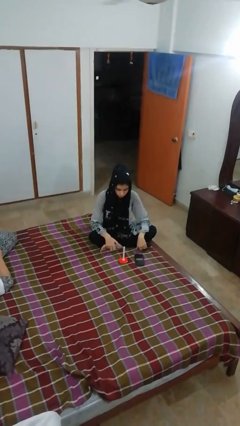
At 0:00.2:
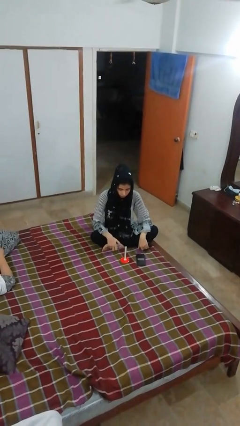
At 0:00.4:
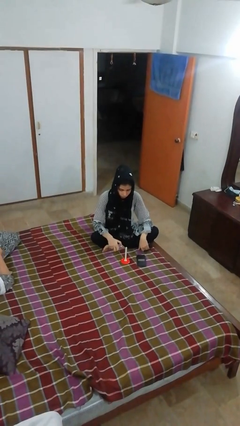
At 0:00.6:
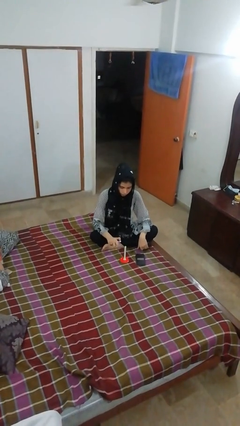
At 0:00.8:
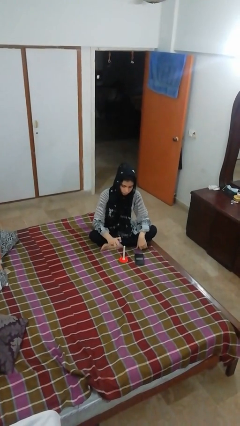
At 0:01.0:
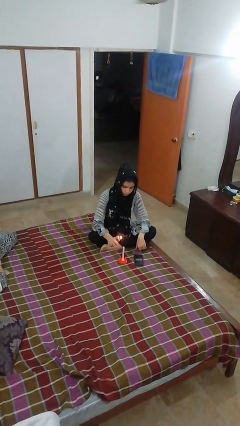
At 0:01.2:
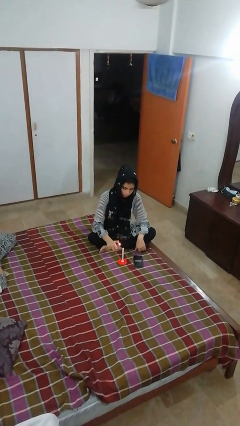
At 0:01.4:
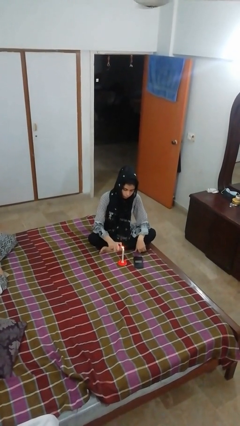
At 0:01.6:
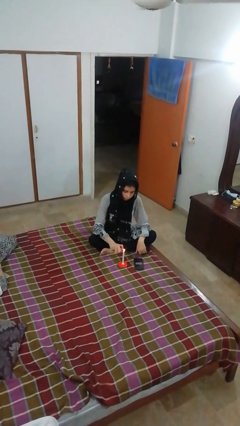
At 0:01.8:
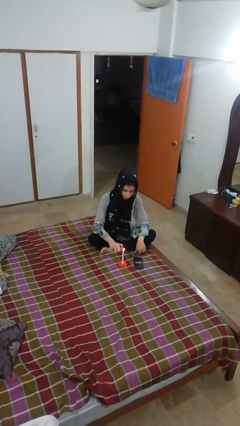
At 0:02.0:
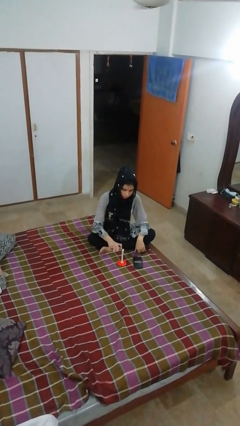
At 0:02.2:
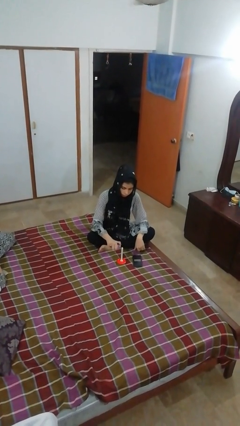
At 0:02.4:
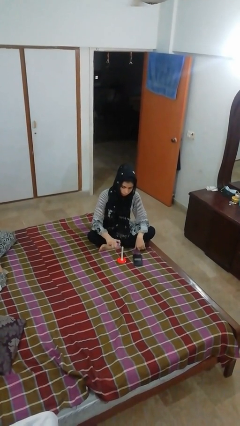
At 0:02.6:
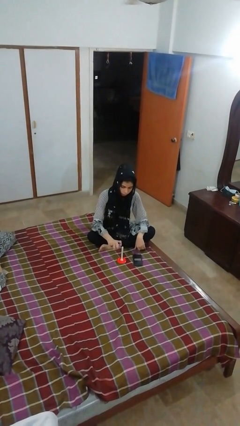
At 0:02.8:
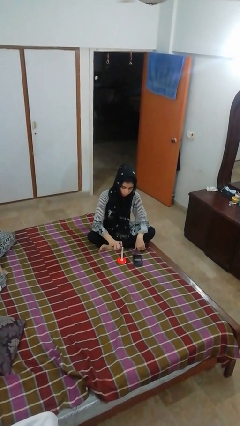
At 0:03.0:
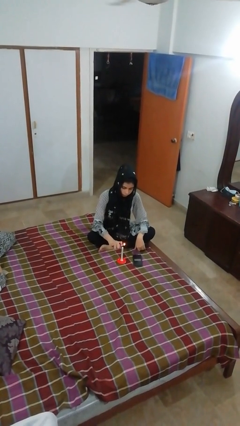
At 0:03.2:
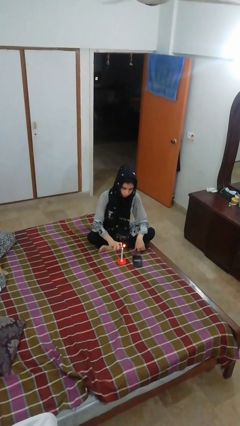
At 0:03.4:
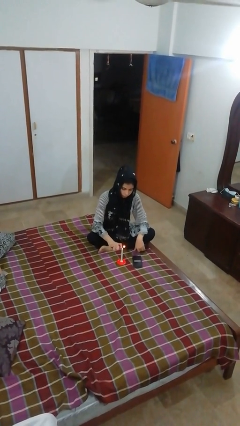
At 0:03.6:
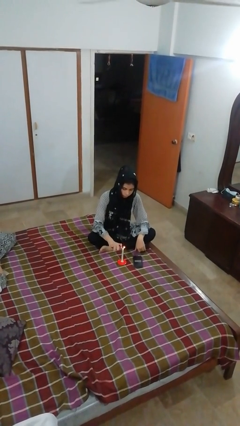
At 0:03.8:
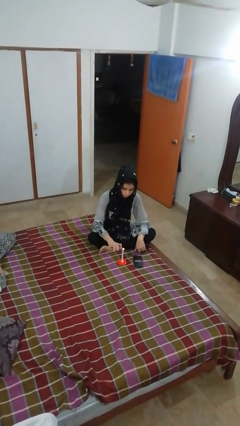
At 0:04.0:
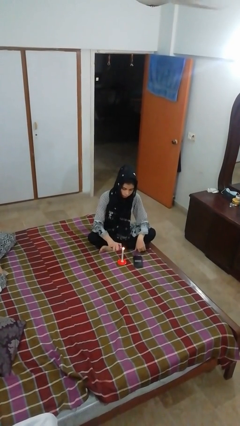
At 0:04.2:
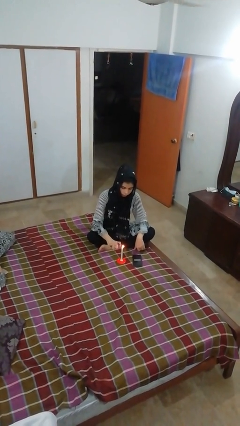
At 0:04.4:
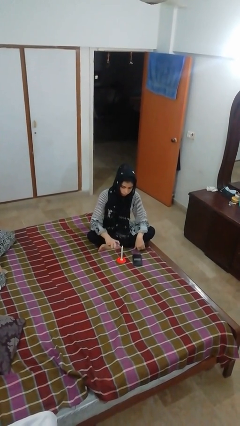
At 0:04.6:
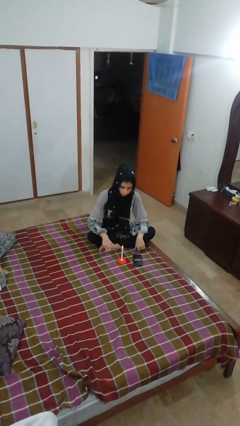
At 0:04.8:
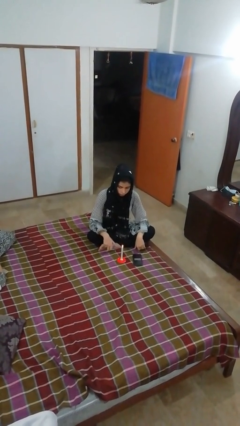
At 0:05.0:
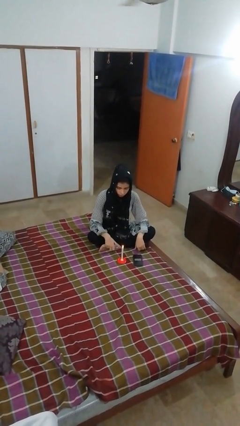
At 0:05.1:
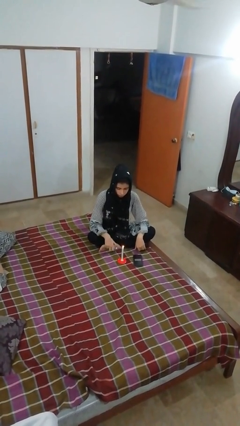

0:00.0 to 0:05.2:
person lights candle

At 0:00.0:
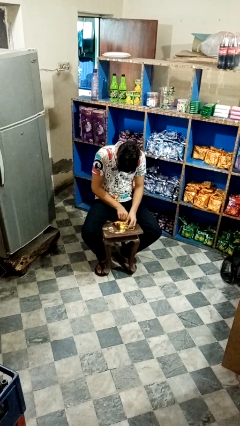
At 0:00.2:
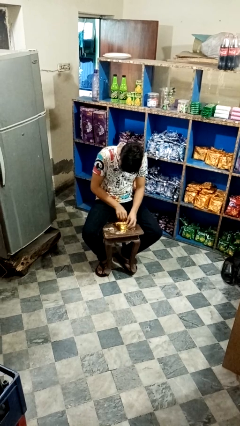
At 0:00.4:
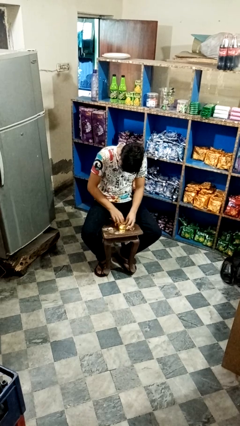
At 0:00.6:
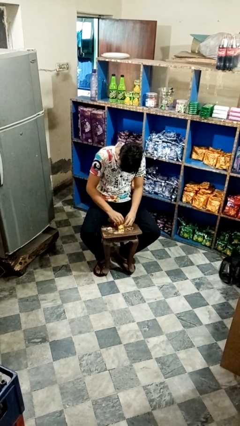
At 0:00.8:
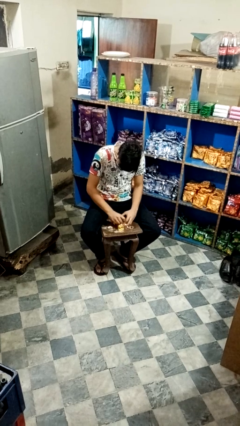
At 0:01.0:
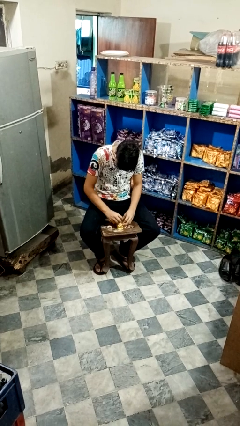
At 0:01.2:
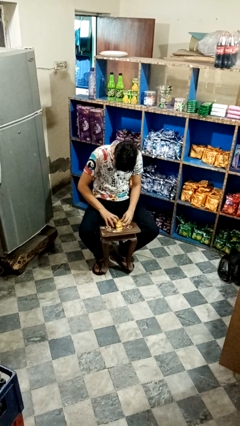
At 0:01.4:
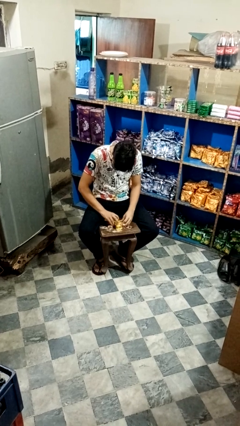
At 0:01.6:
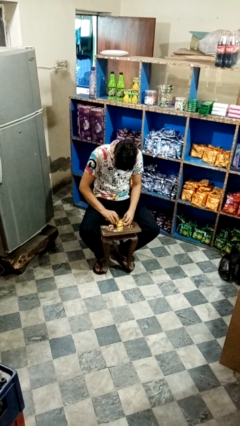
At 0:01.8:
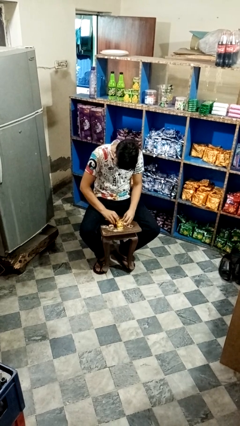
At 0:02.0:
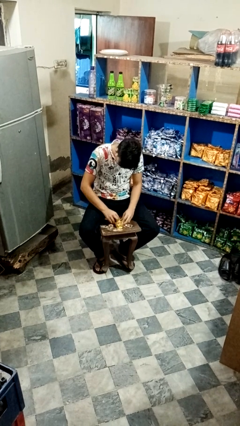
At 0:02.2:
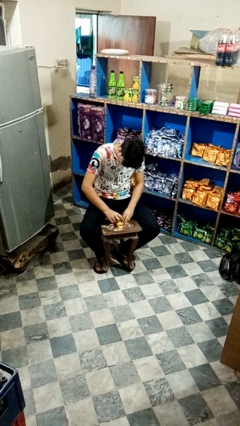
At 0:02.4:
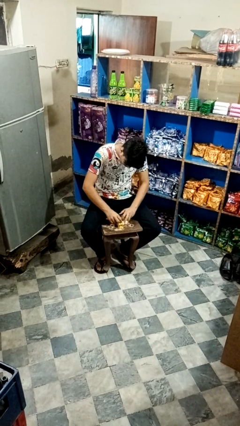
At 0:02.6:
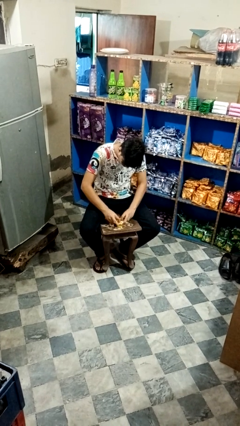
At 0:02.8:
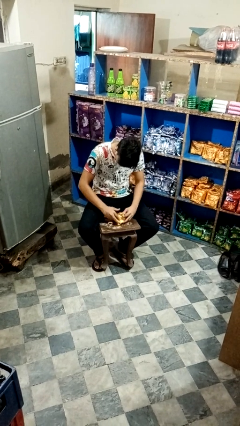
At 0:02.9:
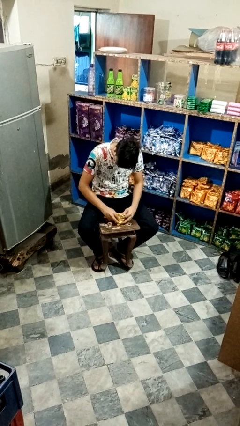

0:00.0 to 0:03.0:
person wraps box

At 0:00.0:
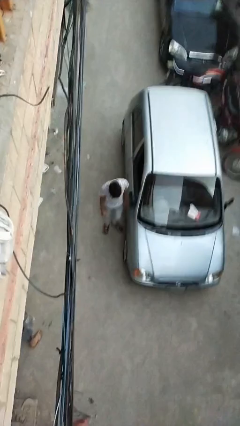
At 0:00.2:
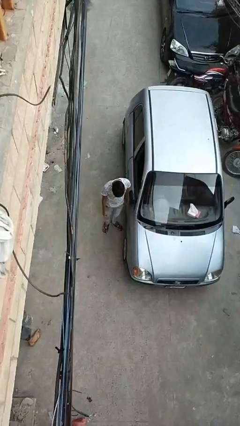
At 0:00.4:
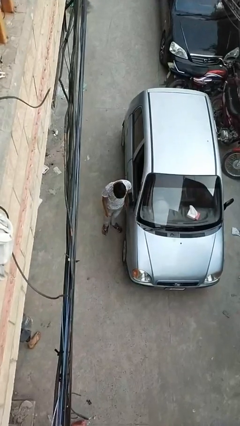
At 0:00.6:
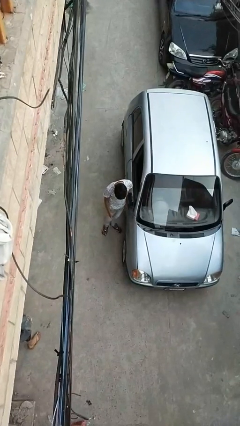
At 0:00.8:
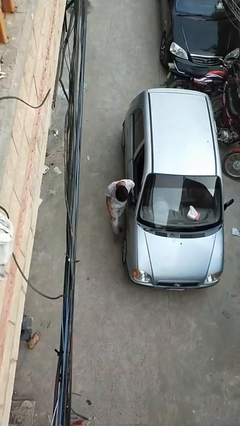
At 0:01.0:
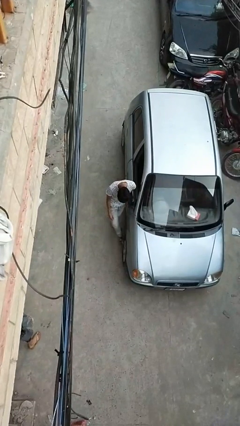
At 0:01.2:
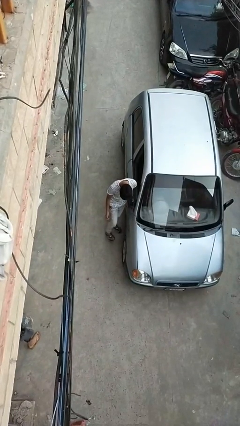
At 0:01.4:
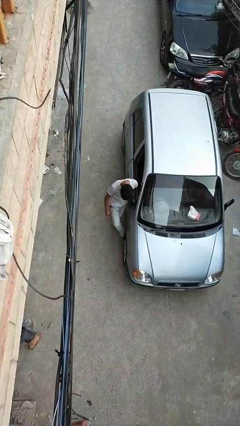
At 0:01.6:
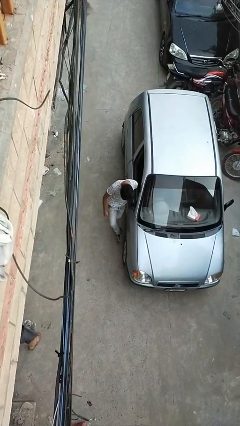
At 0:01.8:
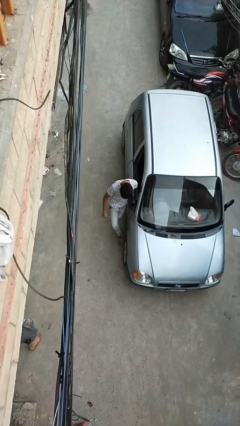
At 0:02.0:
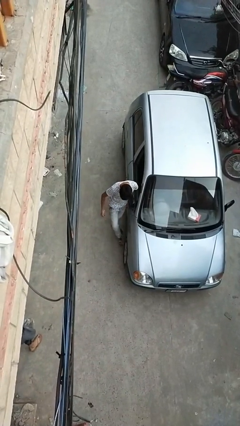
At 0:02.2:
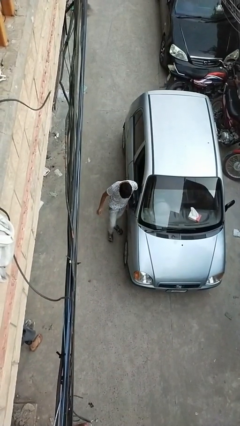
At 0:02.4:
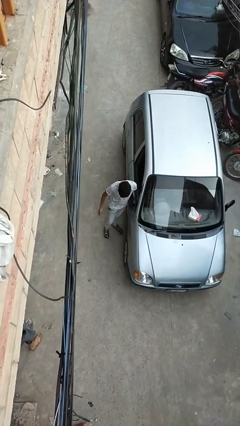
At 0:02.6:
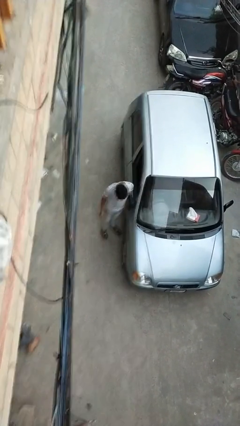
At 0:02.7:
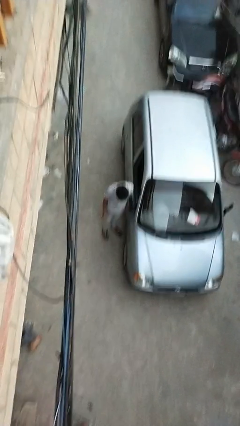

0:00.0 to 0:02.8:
person kicks car tires

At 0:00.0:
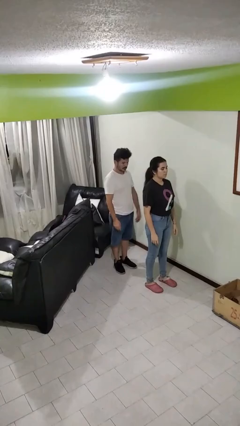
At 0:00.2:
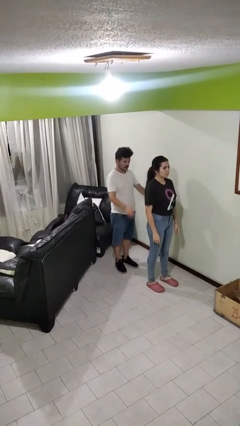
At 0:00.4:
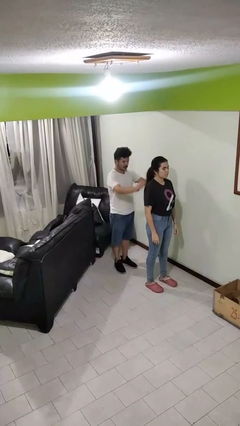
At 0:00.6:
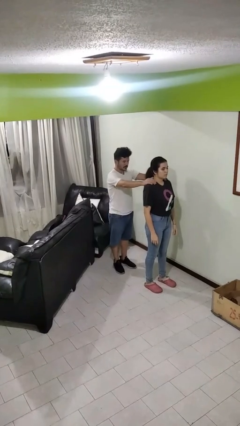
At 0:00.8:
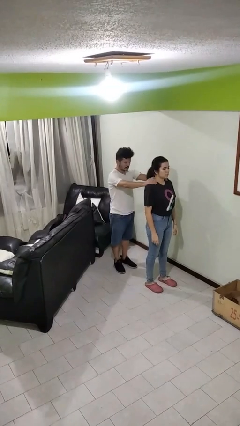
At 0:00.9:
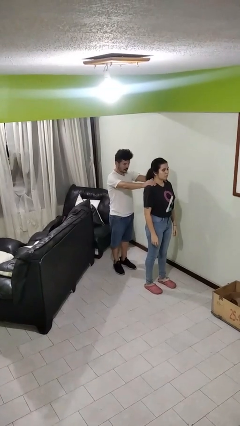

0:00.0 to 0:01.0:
person grabs person by shoulder

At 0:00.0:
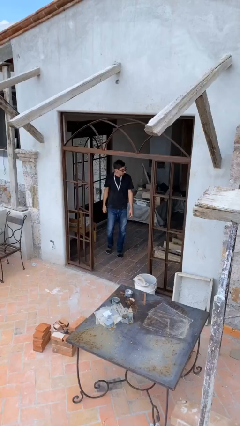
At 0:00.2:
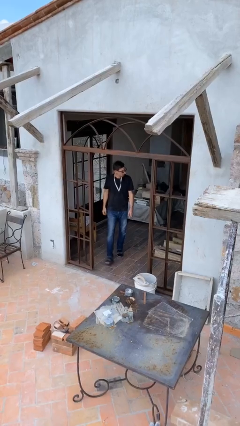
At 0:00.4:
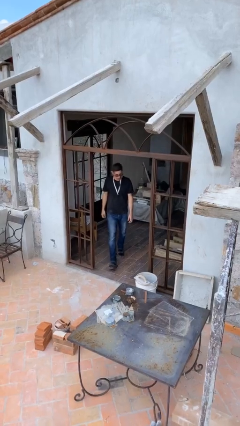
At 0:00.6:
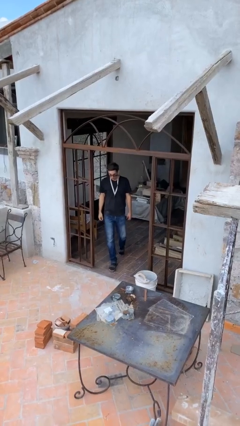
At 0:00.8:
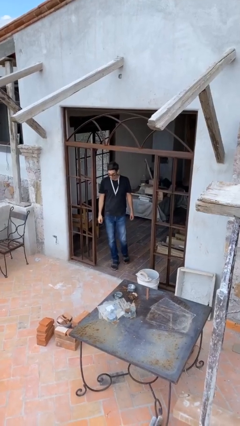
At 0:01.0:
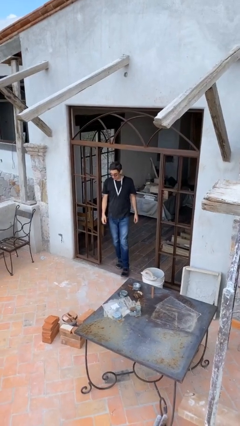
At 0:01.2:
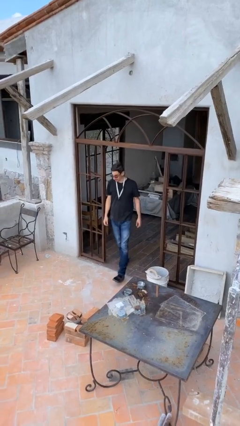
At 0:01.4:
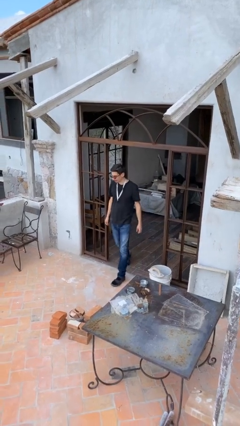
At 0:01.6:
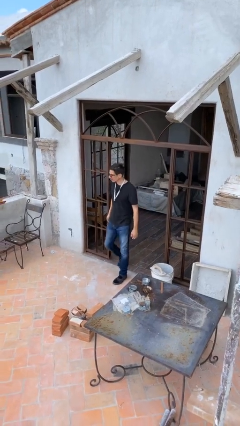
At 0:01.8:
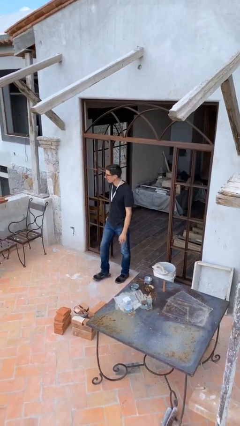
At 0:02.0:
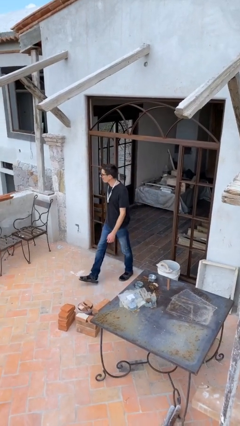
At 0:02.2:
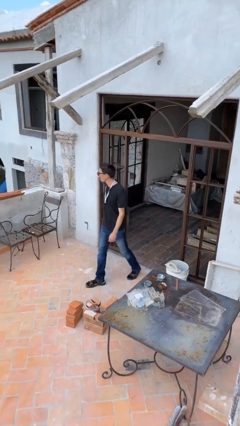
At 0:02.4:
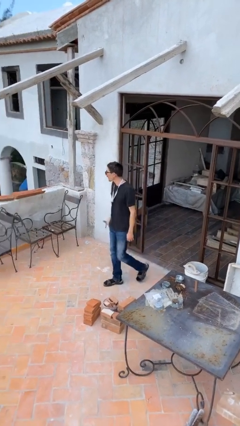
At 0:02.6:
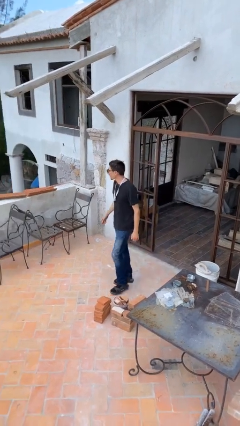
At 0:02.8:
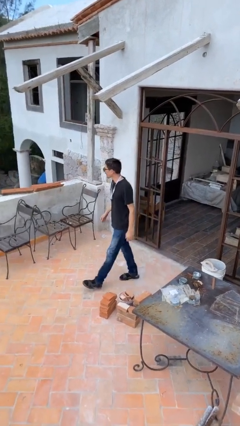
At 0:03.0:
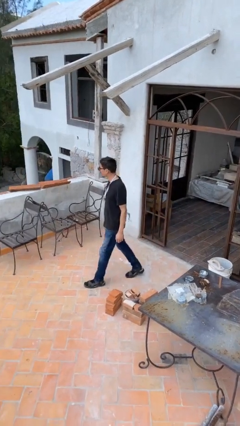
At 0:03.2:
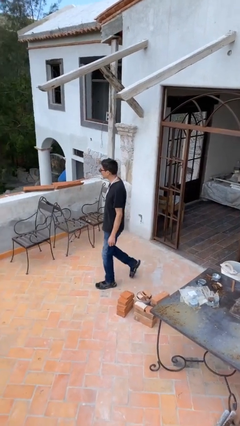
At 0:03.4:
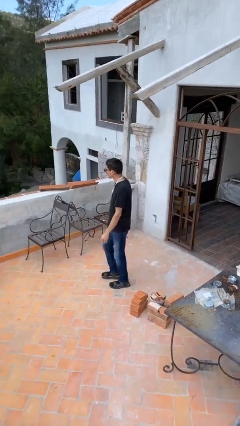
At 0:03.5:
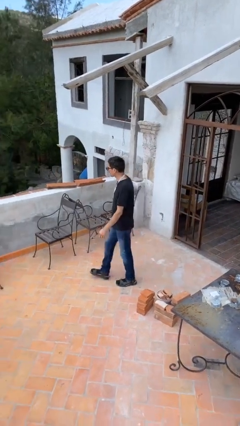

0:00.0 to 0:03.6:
person enters scene through structure

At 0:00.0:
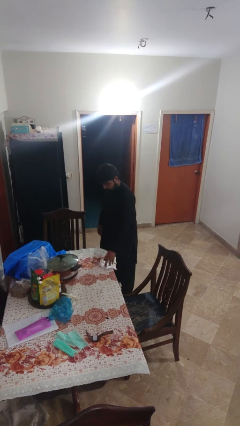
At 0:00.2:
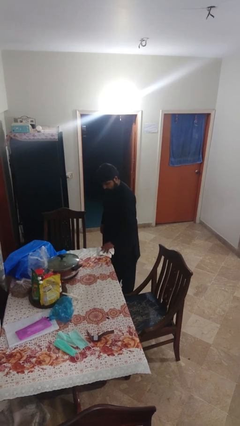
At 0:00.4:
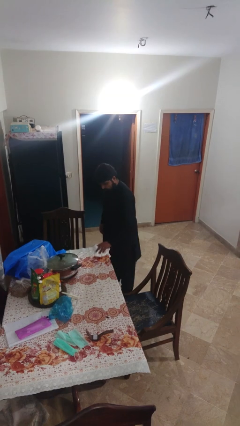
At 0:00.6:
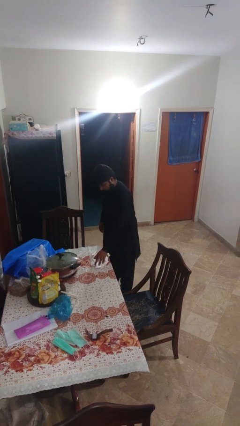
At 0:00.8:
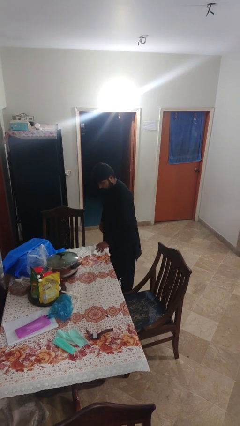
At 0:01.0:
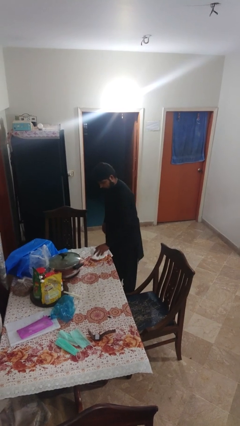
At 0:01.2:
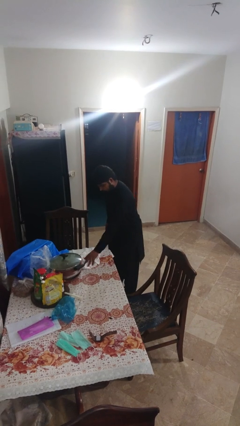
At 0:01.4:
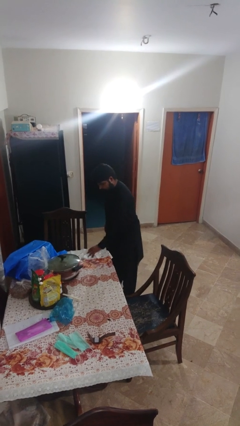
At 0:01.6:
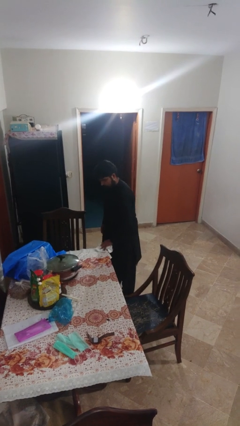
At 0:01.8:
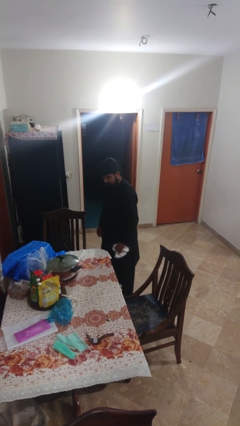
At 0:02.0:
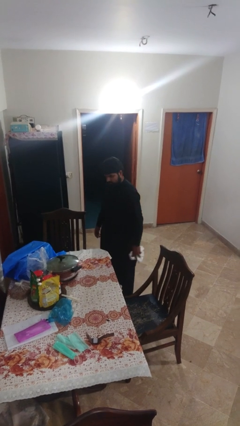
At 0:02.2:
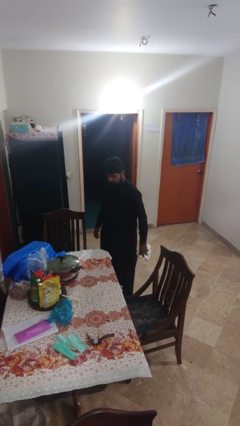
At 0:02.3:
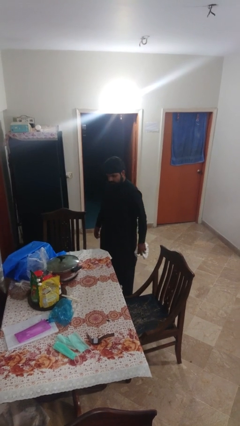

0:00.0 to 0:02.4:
person cleans table with rag
